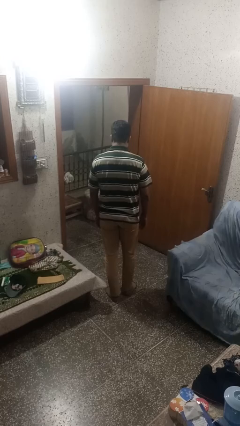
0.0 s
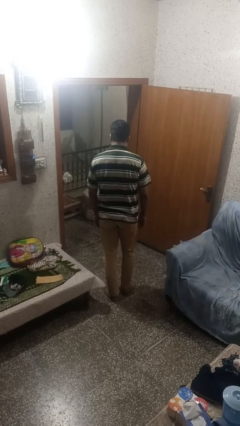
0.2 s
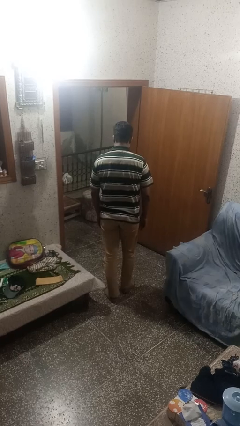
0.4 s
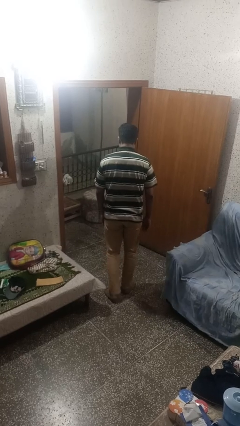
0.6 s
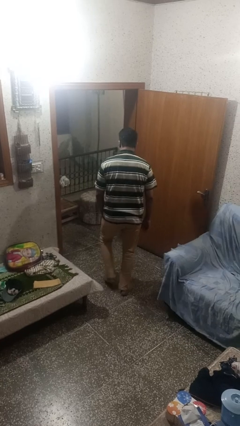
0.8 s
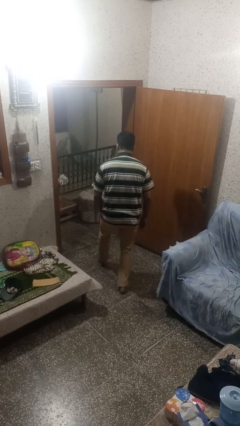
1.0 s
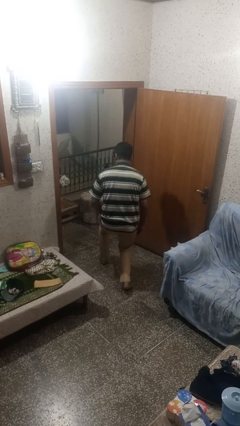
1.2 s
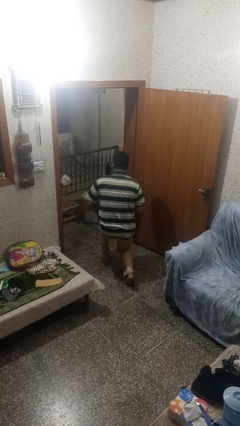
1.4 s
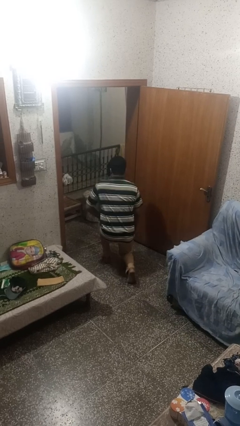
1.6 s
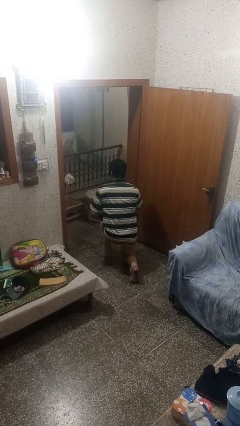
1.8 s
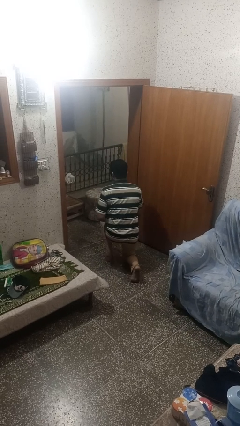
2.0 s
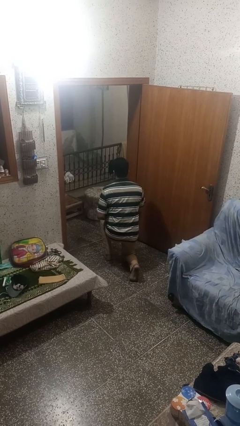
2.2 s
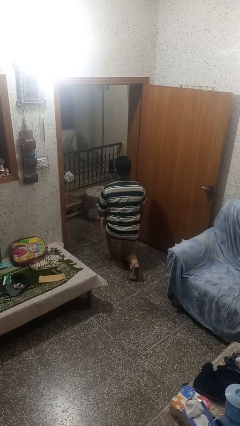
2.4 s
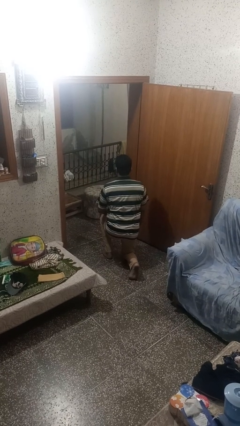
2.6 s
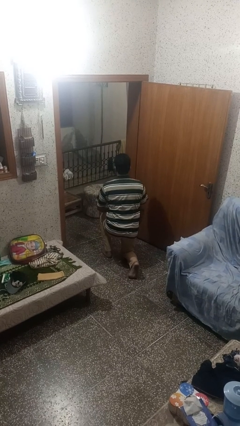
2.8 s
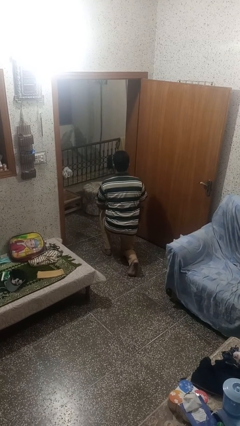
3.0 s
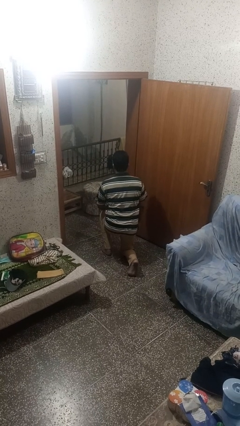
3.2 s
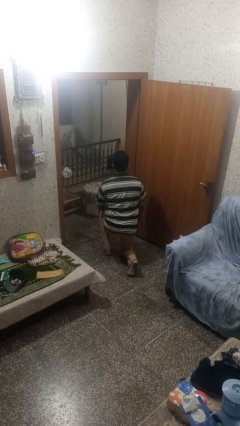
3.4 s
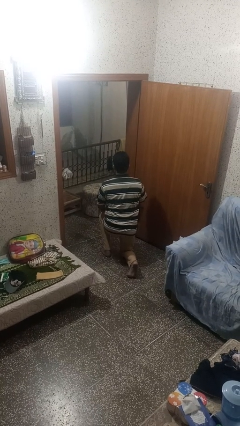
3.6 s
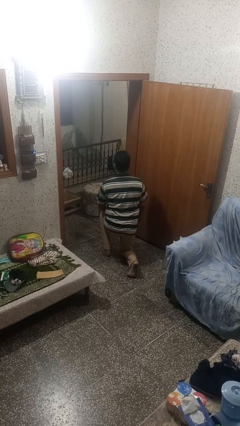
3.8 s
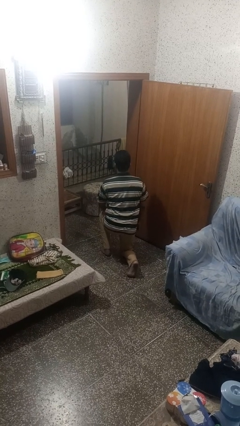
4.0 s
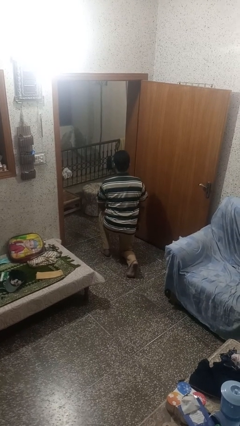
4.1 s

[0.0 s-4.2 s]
person kneels

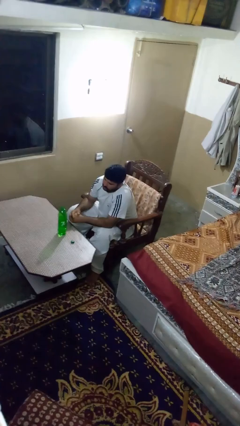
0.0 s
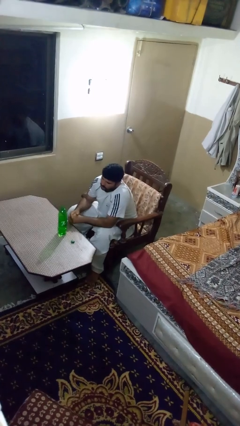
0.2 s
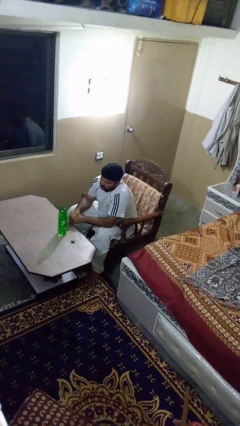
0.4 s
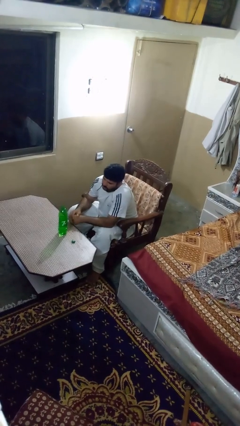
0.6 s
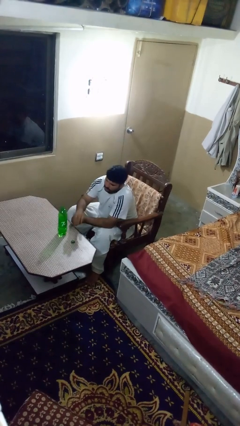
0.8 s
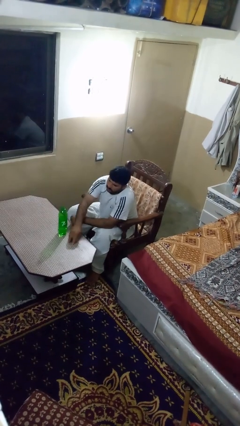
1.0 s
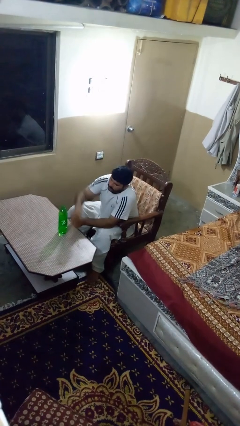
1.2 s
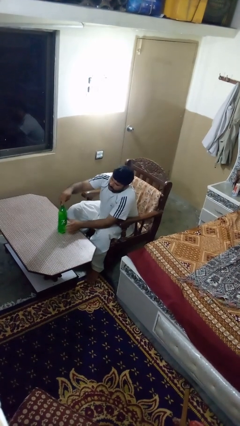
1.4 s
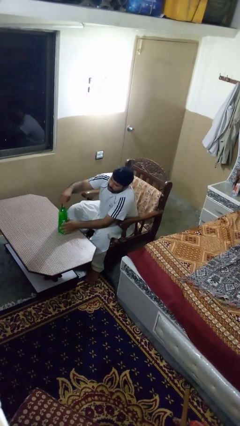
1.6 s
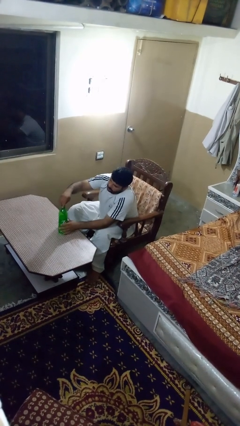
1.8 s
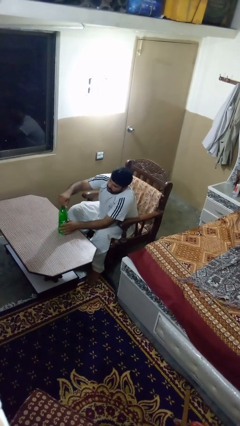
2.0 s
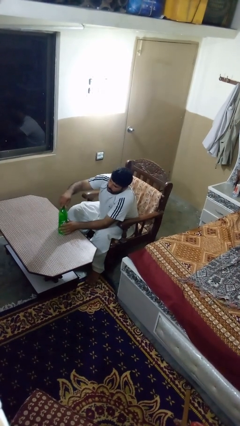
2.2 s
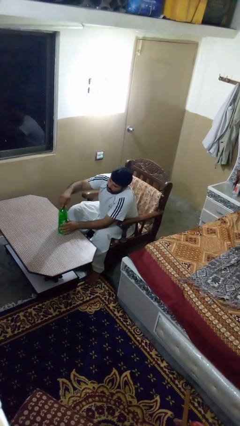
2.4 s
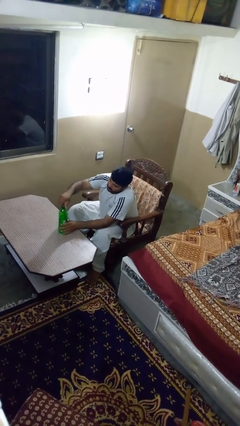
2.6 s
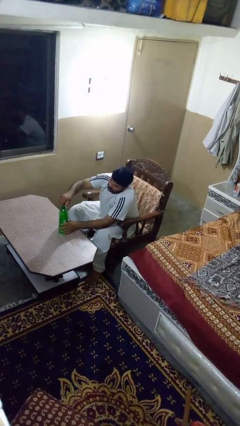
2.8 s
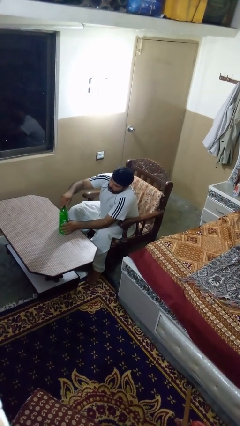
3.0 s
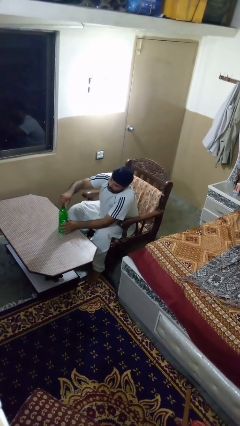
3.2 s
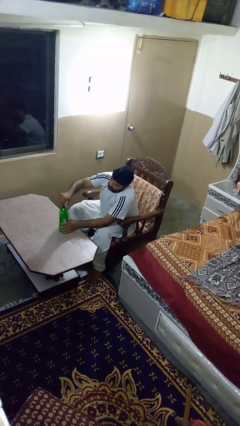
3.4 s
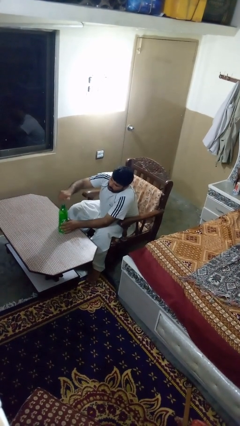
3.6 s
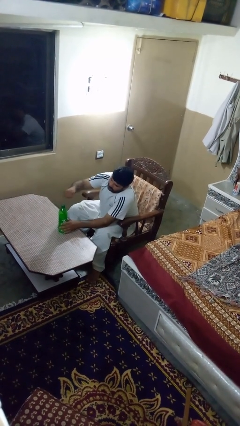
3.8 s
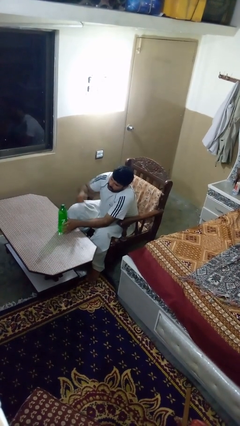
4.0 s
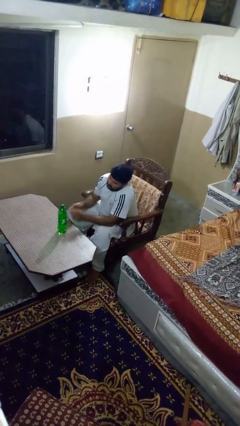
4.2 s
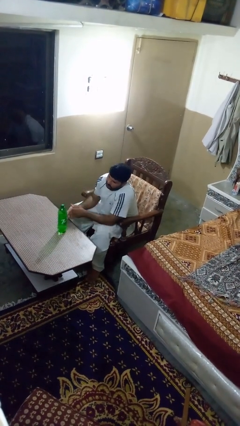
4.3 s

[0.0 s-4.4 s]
person screws lid to bottle

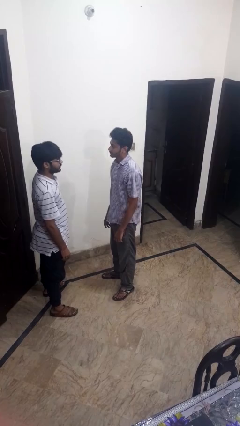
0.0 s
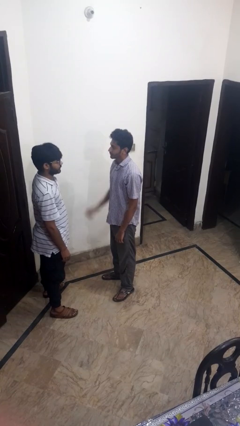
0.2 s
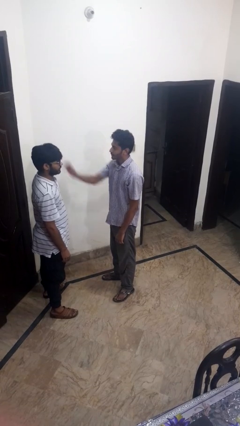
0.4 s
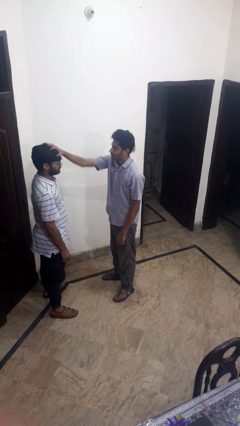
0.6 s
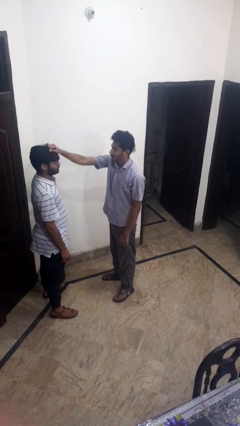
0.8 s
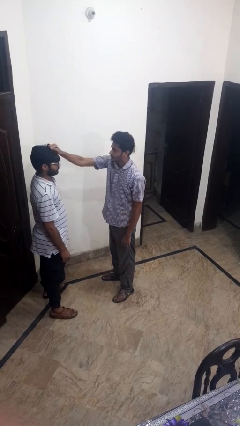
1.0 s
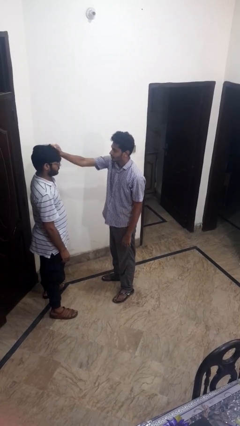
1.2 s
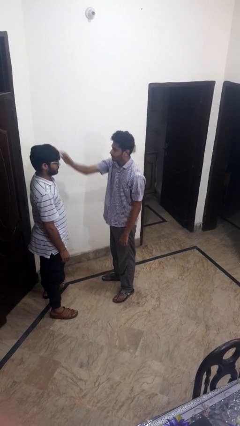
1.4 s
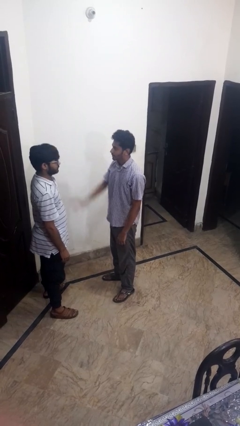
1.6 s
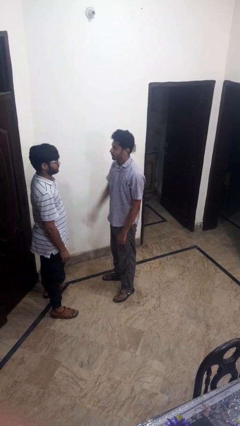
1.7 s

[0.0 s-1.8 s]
person grabs person by hair

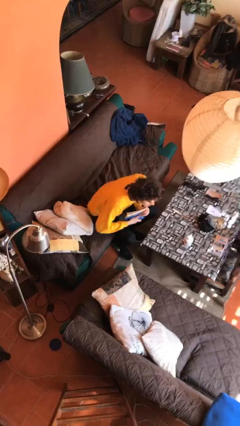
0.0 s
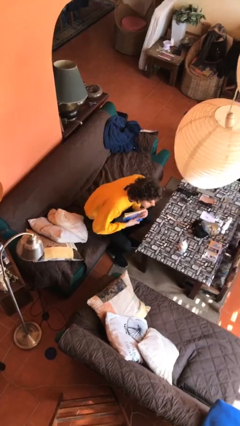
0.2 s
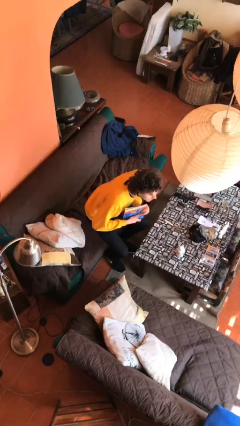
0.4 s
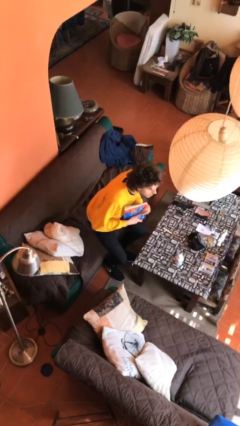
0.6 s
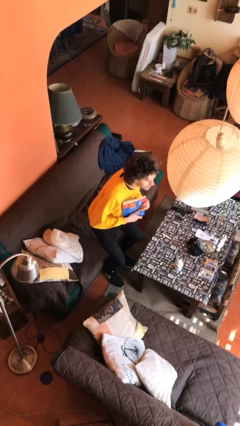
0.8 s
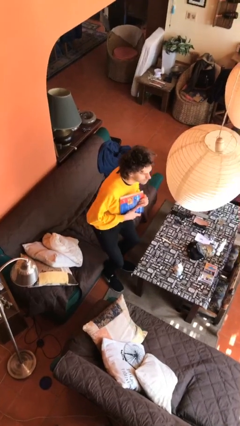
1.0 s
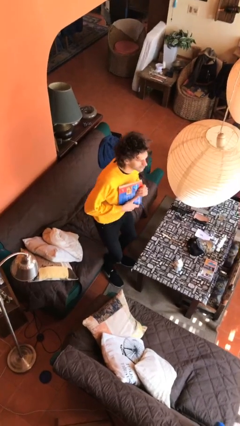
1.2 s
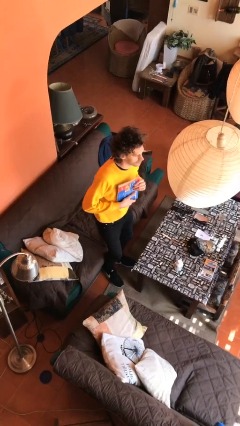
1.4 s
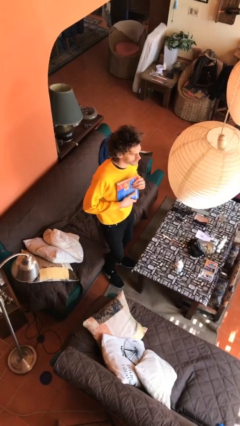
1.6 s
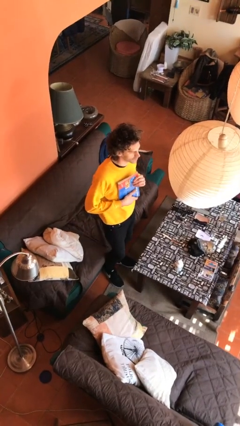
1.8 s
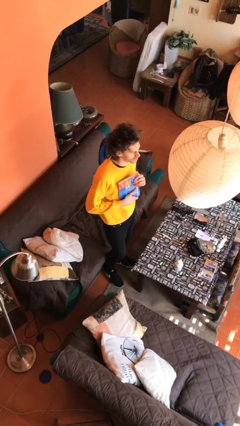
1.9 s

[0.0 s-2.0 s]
person stands up

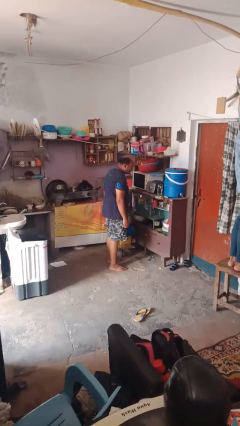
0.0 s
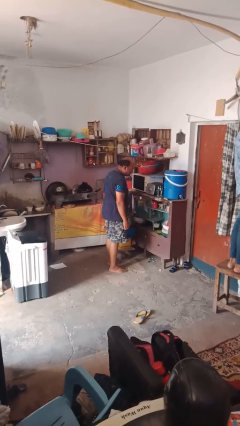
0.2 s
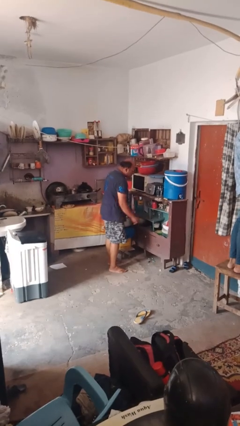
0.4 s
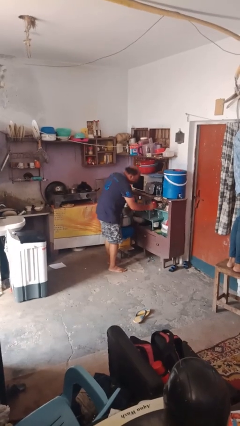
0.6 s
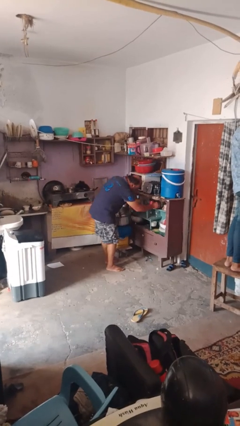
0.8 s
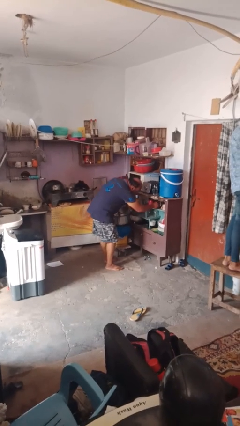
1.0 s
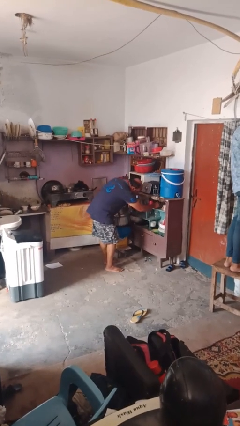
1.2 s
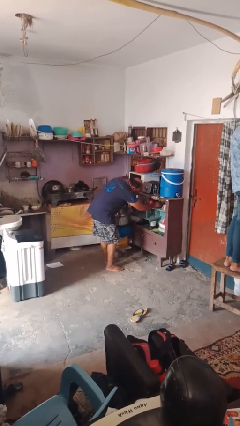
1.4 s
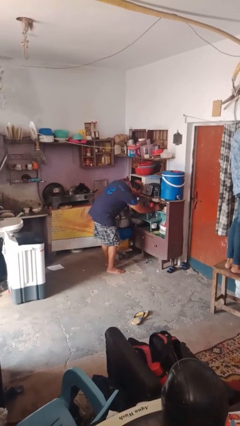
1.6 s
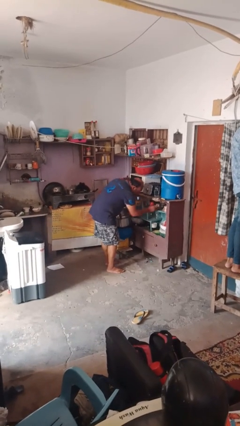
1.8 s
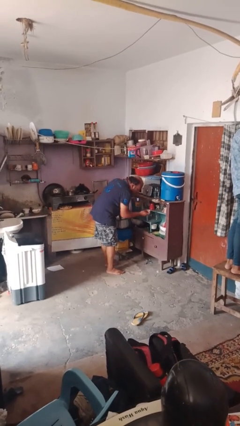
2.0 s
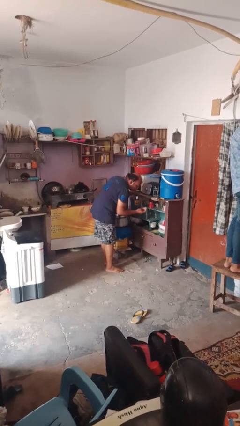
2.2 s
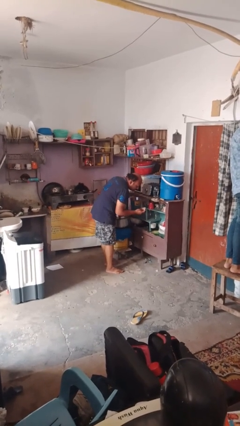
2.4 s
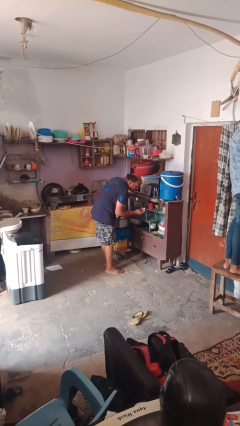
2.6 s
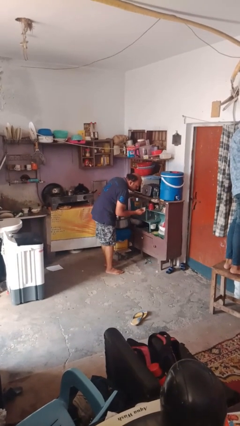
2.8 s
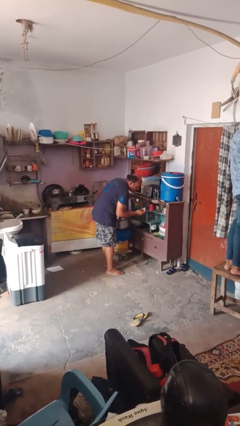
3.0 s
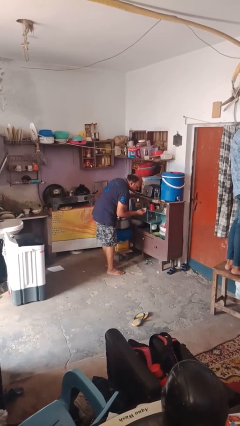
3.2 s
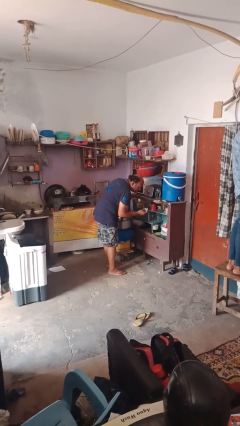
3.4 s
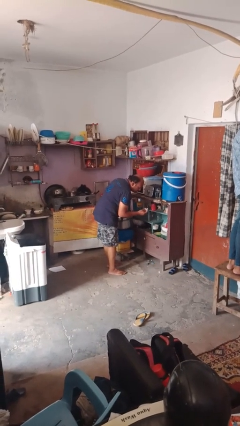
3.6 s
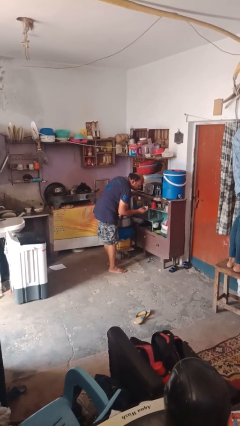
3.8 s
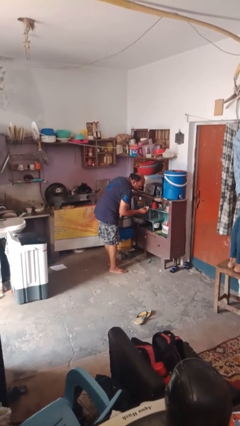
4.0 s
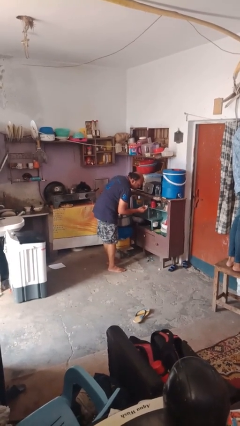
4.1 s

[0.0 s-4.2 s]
person takes object from kitchen drawer

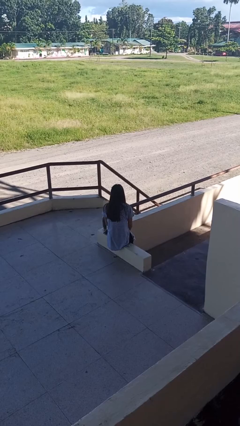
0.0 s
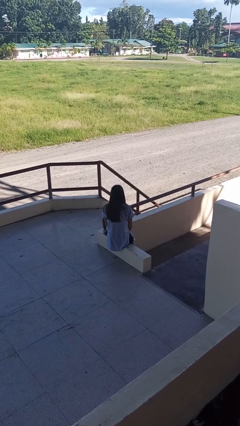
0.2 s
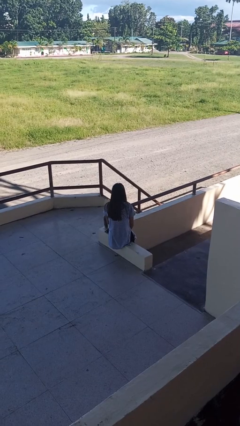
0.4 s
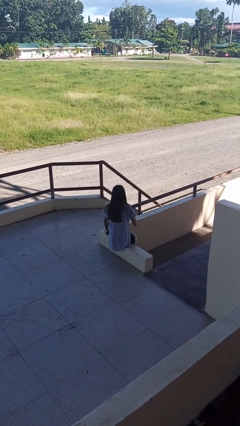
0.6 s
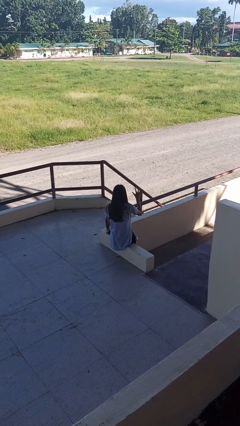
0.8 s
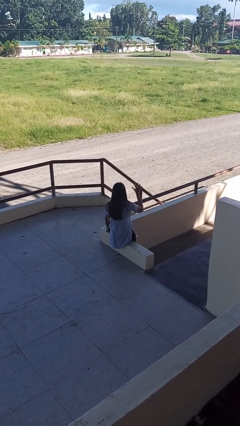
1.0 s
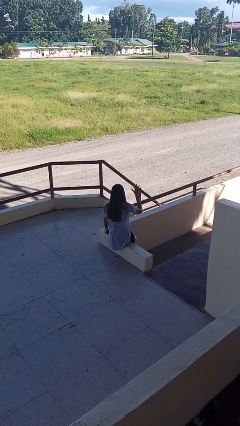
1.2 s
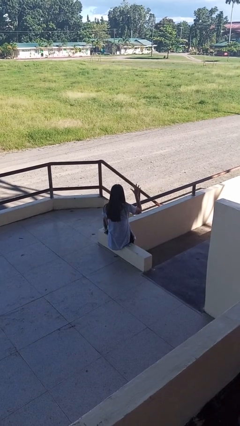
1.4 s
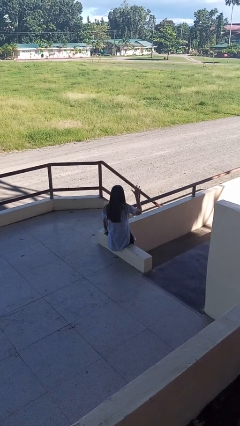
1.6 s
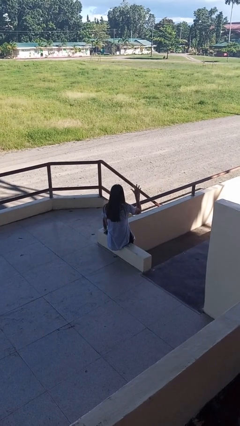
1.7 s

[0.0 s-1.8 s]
person gestures number five
